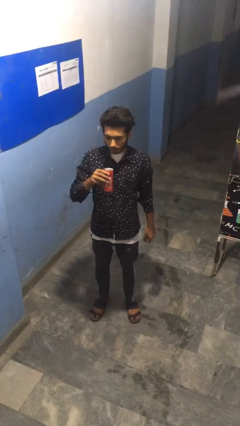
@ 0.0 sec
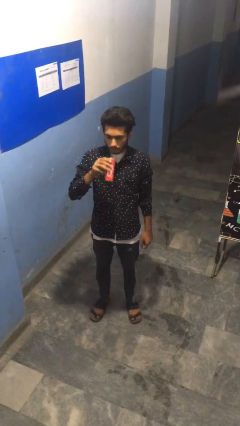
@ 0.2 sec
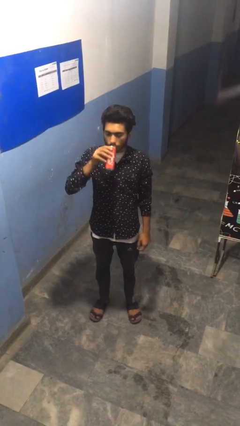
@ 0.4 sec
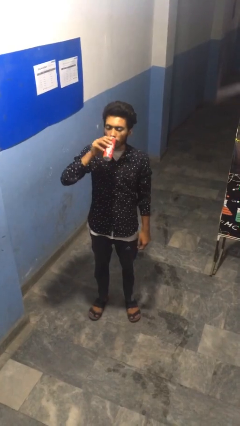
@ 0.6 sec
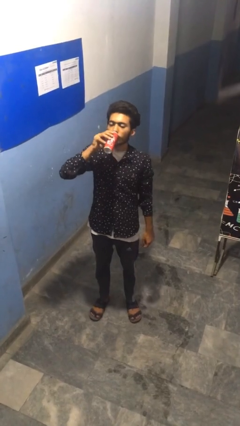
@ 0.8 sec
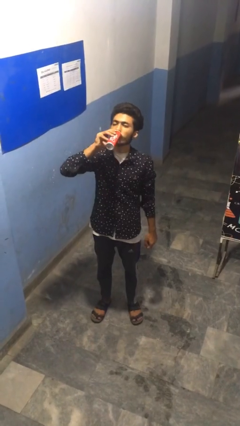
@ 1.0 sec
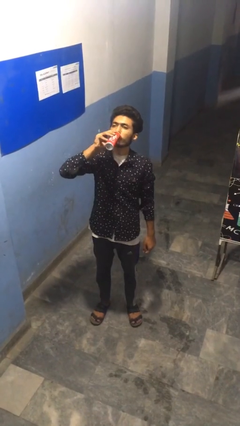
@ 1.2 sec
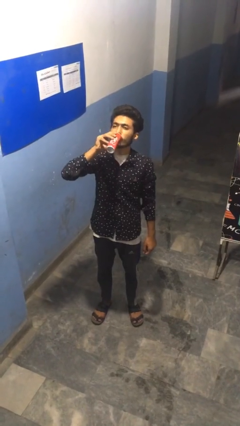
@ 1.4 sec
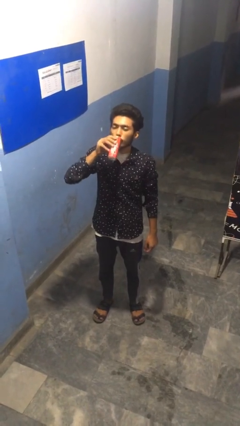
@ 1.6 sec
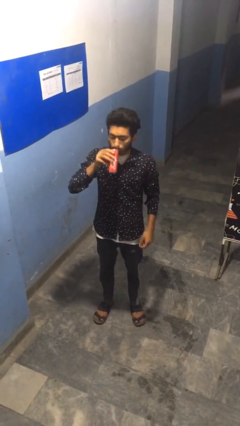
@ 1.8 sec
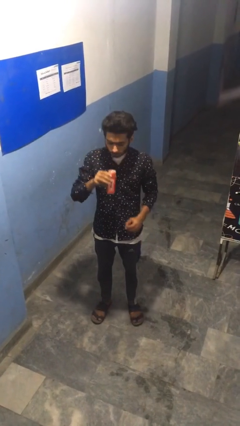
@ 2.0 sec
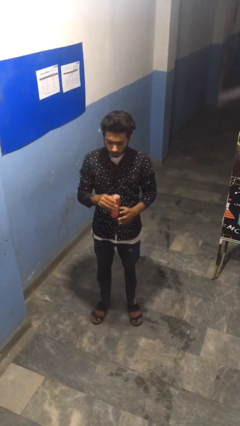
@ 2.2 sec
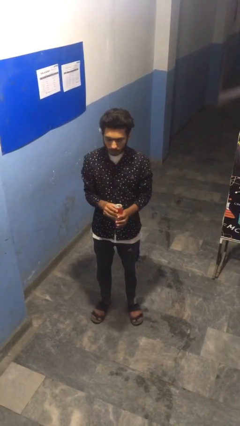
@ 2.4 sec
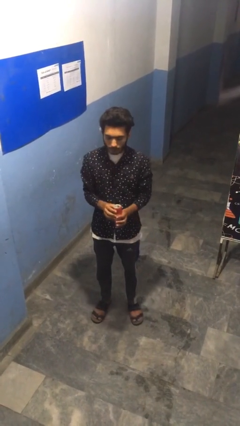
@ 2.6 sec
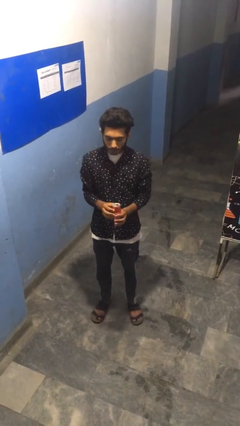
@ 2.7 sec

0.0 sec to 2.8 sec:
person drinks from beverage can

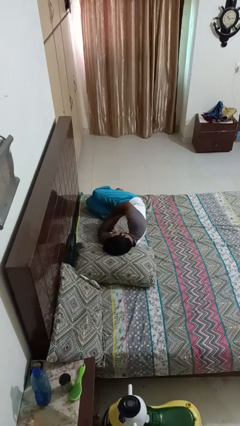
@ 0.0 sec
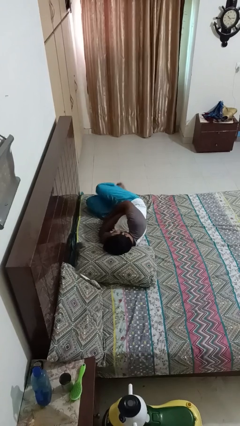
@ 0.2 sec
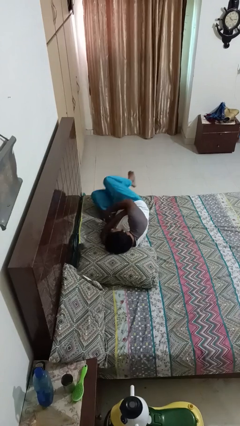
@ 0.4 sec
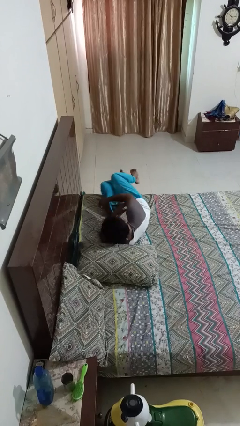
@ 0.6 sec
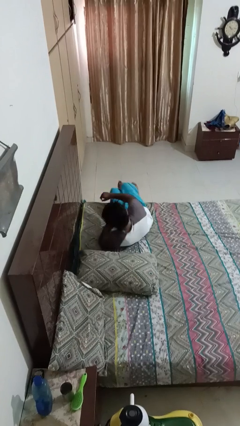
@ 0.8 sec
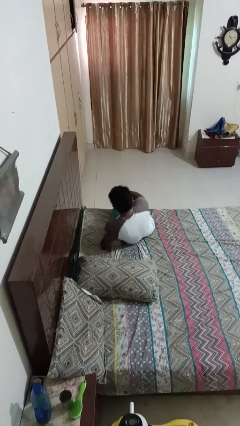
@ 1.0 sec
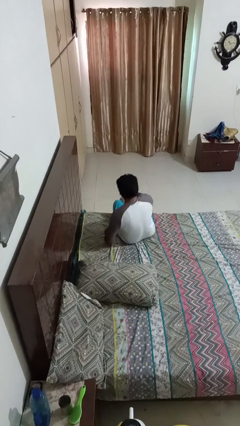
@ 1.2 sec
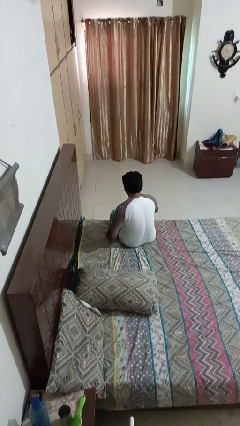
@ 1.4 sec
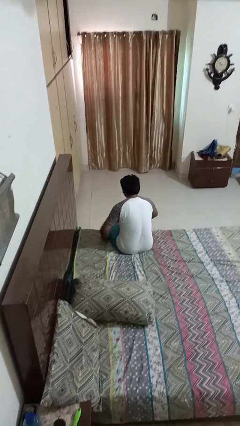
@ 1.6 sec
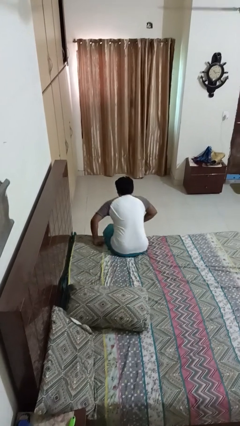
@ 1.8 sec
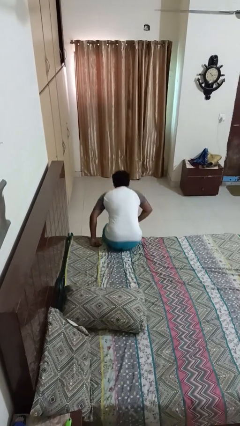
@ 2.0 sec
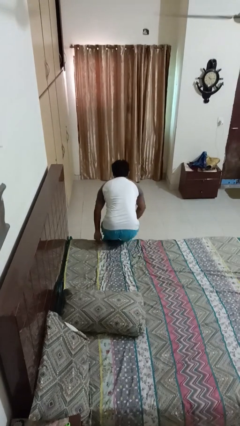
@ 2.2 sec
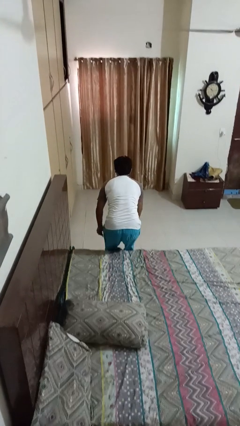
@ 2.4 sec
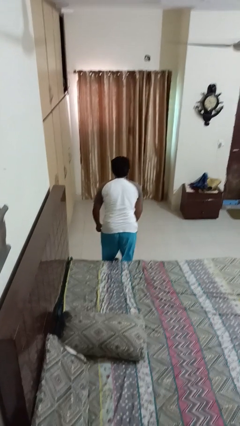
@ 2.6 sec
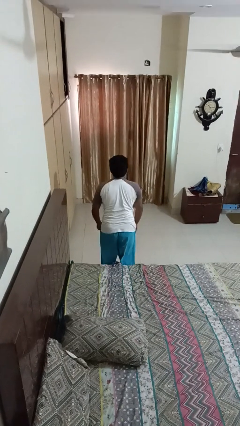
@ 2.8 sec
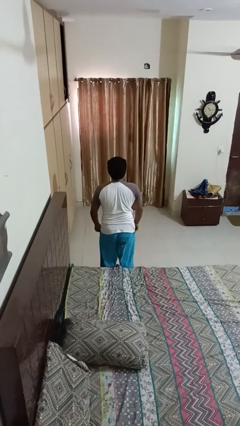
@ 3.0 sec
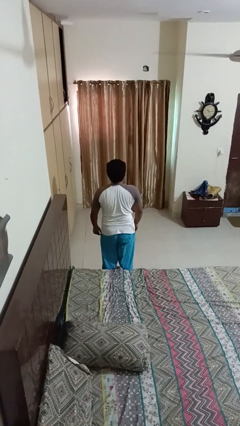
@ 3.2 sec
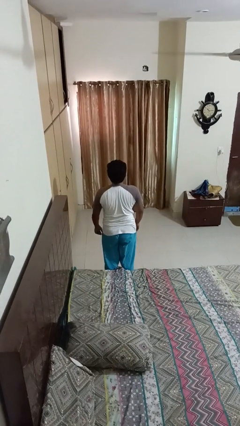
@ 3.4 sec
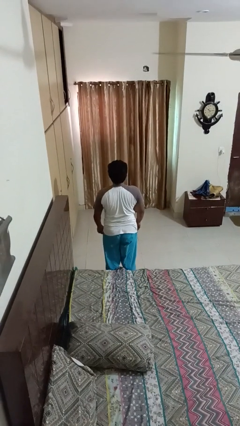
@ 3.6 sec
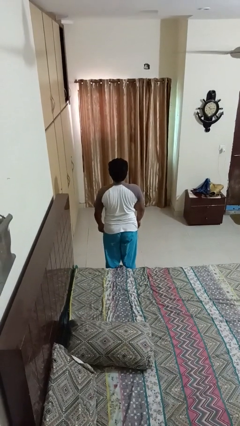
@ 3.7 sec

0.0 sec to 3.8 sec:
person stands up

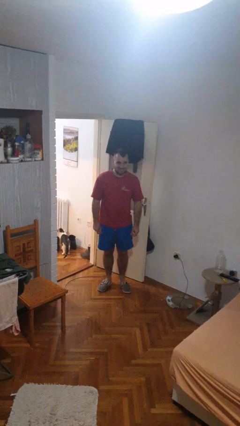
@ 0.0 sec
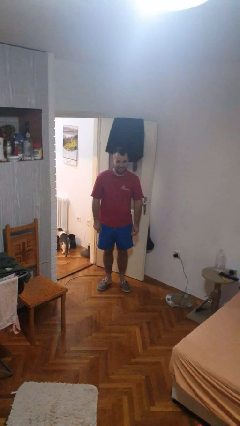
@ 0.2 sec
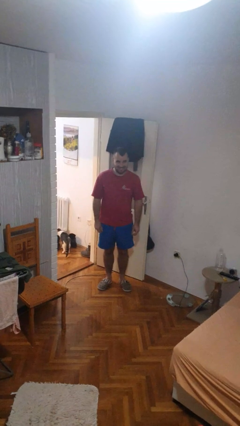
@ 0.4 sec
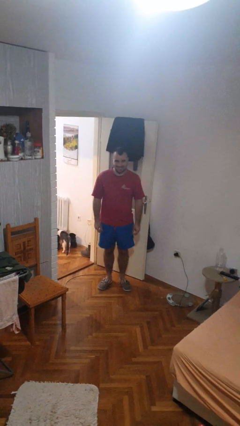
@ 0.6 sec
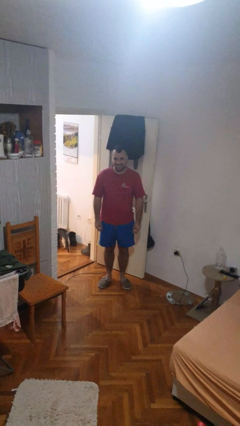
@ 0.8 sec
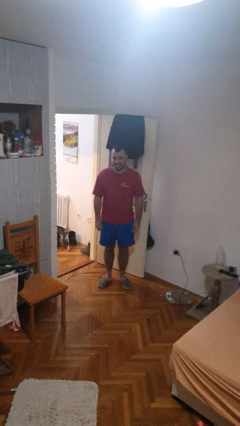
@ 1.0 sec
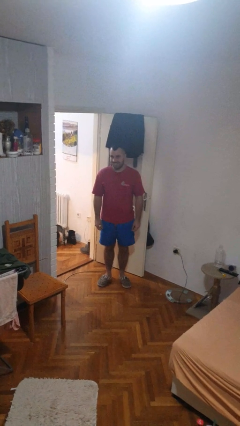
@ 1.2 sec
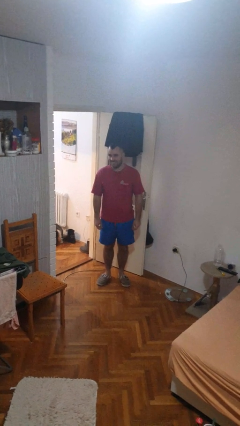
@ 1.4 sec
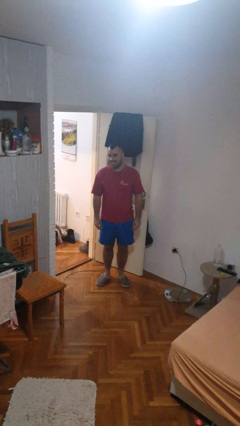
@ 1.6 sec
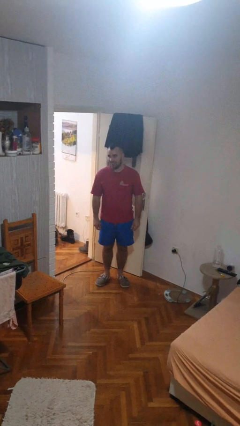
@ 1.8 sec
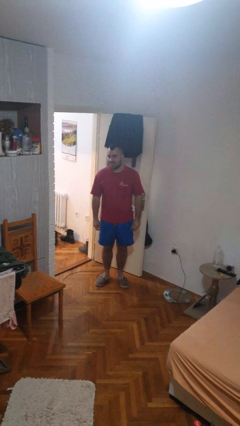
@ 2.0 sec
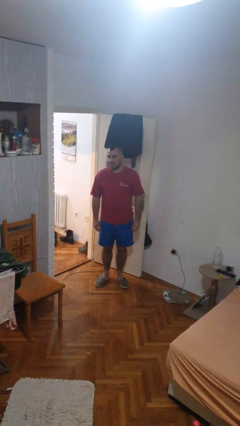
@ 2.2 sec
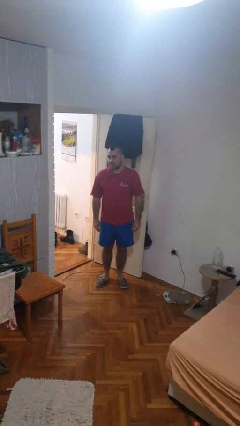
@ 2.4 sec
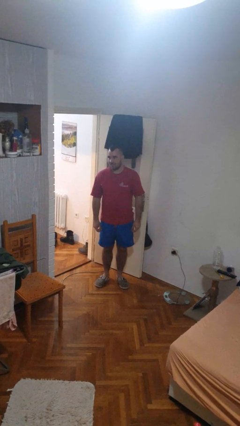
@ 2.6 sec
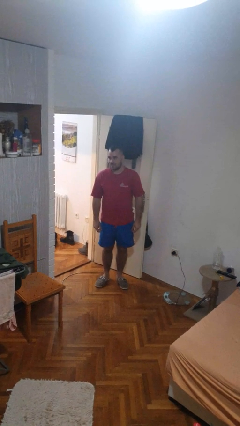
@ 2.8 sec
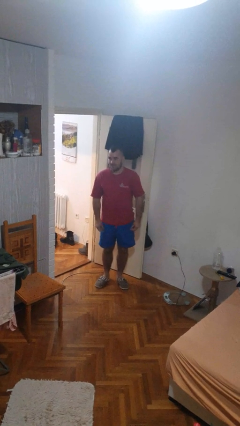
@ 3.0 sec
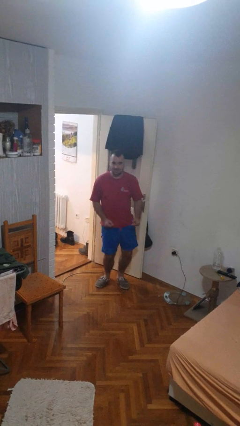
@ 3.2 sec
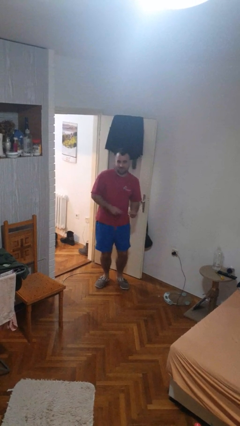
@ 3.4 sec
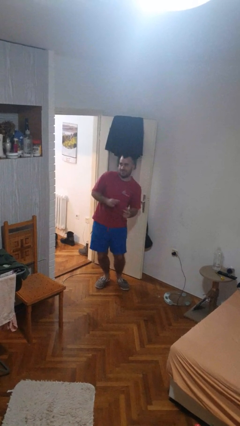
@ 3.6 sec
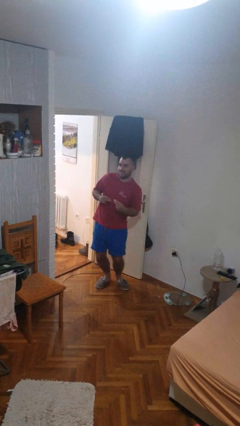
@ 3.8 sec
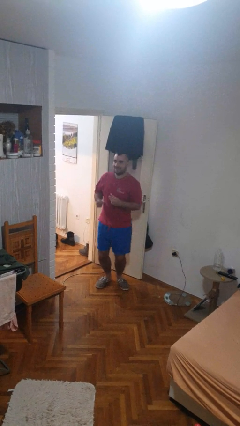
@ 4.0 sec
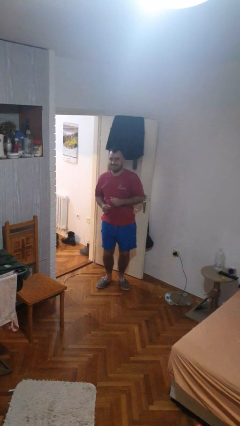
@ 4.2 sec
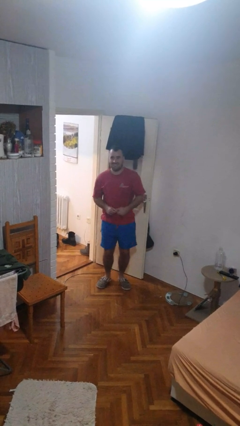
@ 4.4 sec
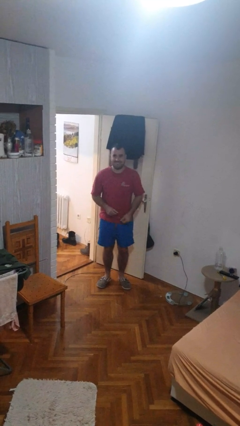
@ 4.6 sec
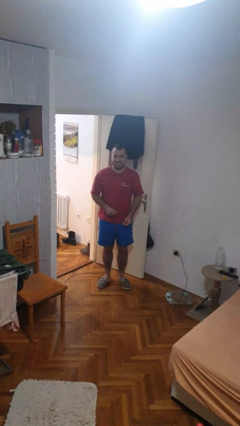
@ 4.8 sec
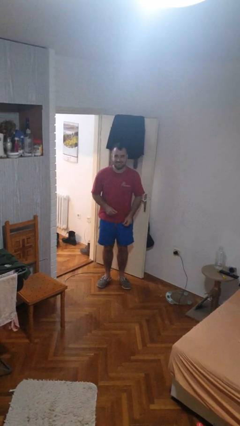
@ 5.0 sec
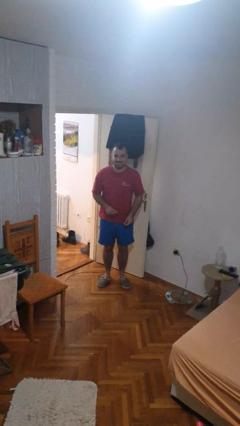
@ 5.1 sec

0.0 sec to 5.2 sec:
person dances in place

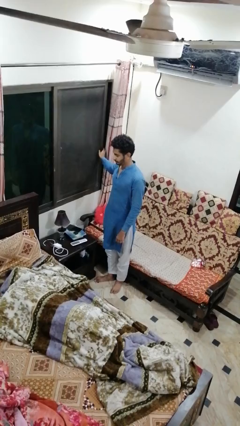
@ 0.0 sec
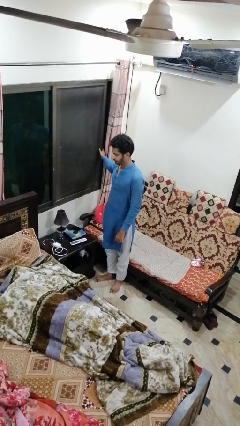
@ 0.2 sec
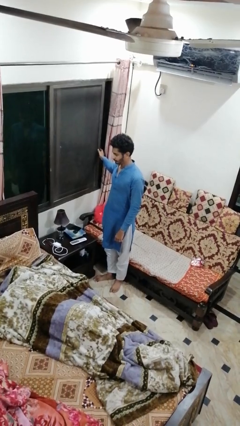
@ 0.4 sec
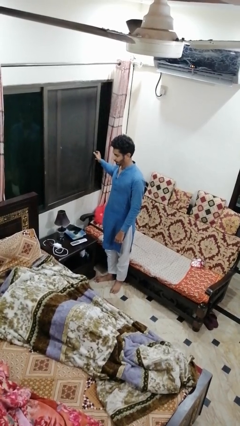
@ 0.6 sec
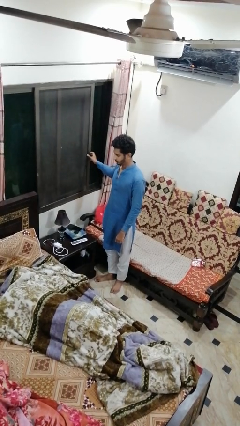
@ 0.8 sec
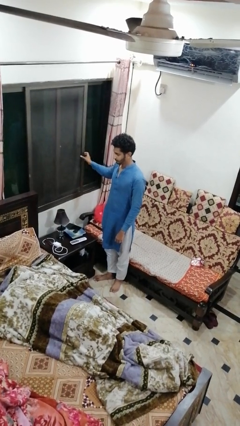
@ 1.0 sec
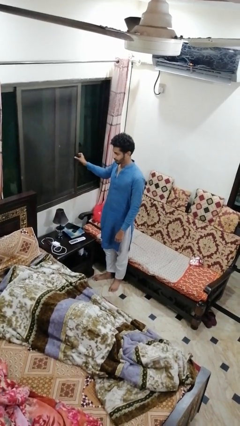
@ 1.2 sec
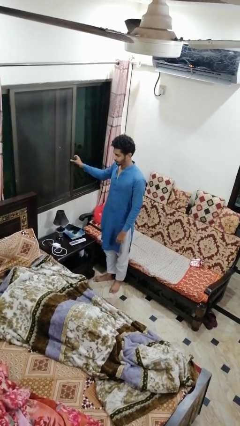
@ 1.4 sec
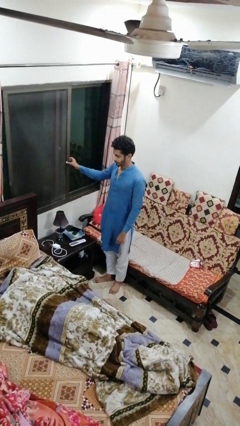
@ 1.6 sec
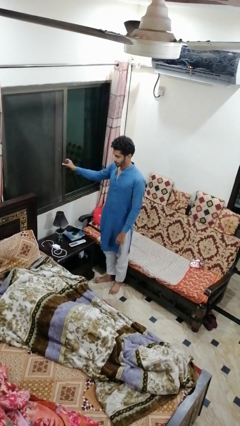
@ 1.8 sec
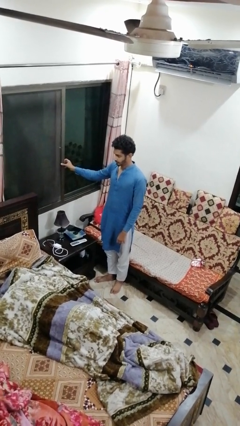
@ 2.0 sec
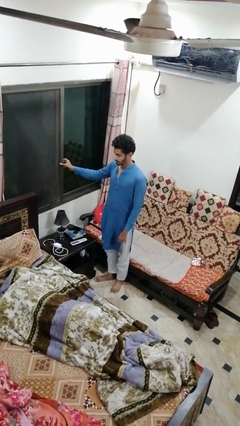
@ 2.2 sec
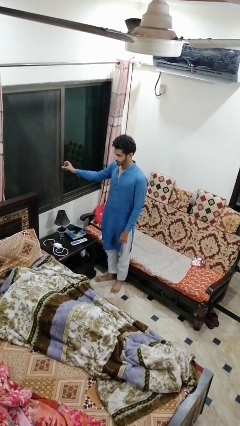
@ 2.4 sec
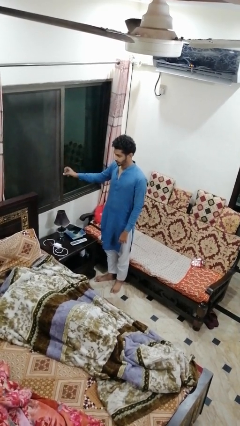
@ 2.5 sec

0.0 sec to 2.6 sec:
person closes home window

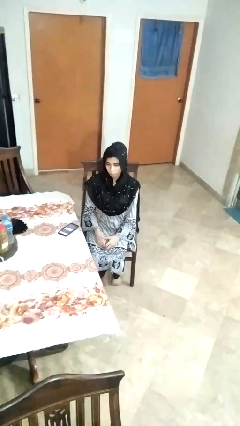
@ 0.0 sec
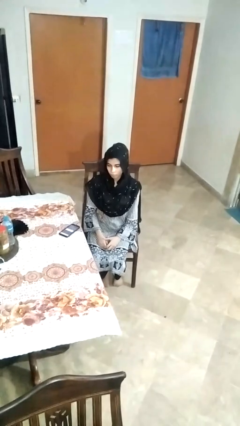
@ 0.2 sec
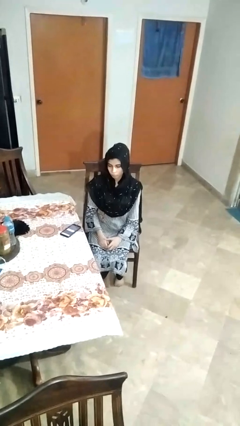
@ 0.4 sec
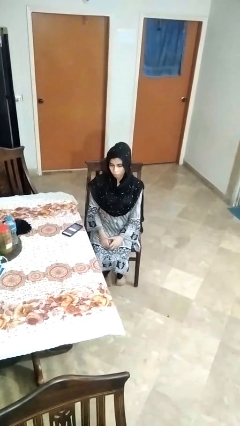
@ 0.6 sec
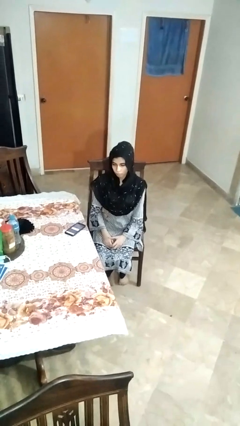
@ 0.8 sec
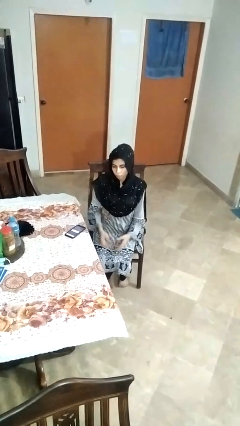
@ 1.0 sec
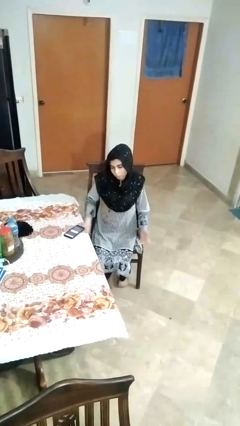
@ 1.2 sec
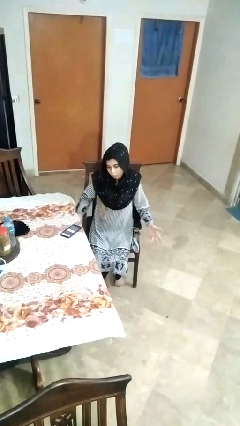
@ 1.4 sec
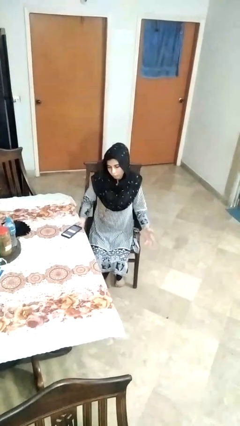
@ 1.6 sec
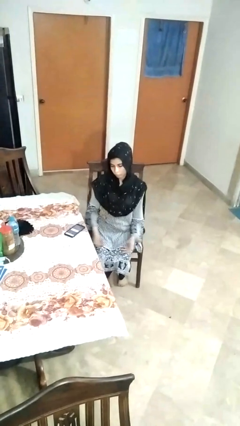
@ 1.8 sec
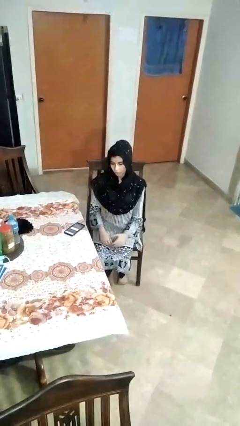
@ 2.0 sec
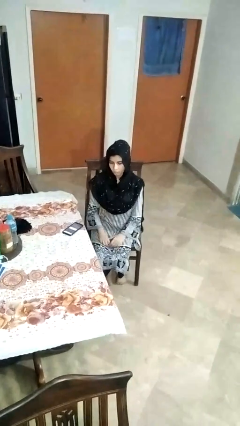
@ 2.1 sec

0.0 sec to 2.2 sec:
person shrugs

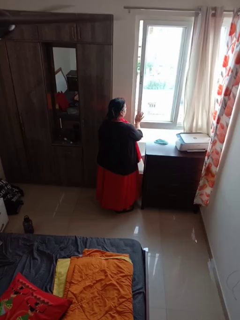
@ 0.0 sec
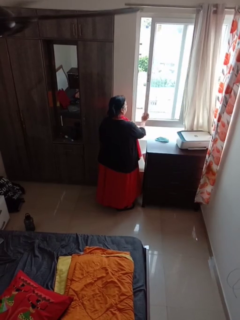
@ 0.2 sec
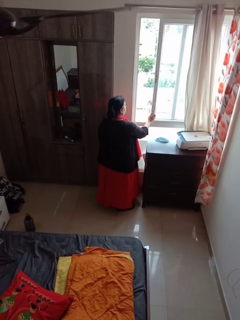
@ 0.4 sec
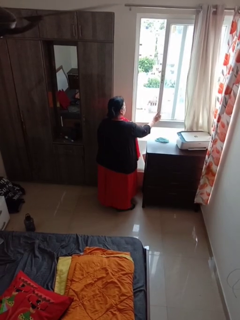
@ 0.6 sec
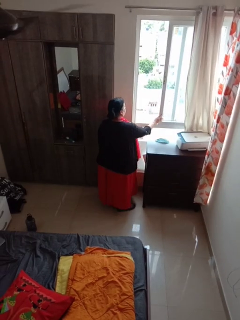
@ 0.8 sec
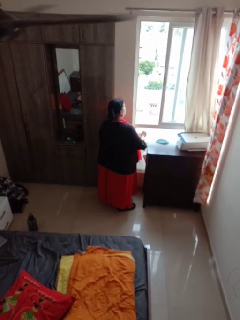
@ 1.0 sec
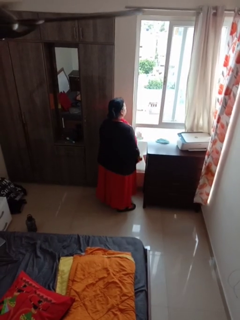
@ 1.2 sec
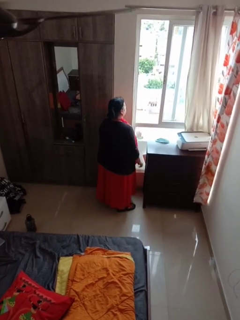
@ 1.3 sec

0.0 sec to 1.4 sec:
person opens home window
